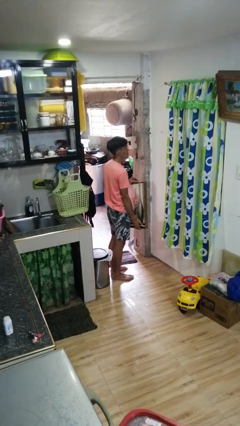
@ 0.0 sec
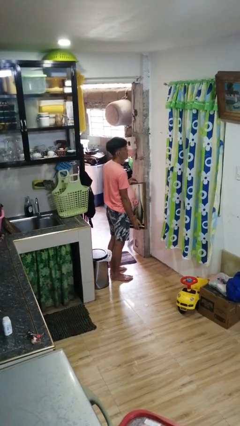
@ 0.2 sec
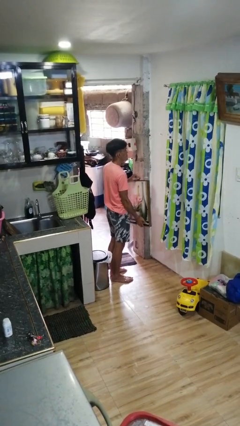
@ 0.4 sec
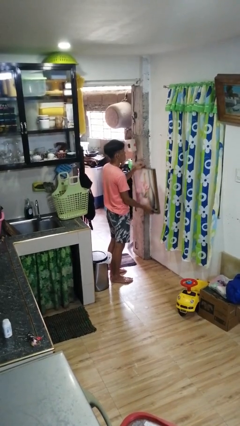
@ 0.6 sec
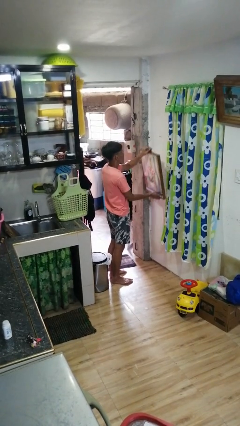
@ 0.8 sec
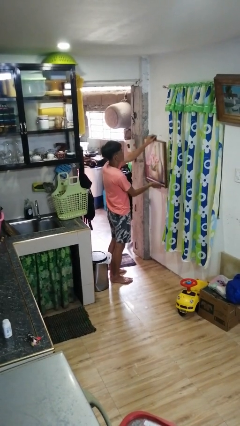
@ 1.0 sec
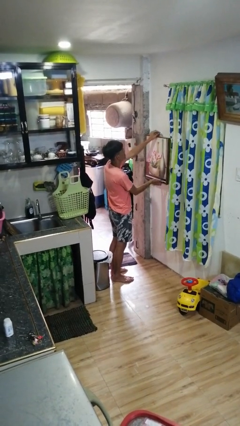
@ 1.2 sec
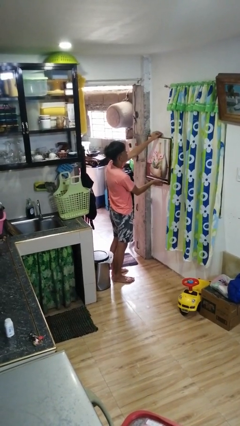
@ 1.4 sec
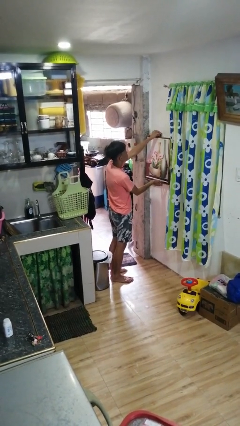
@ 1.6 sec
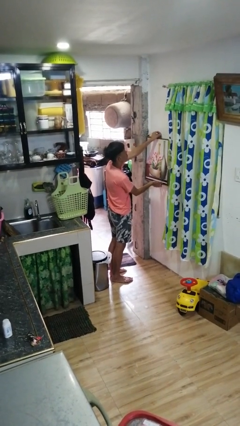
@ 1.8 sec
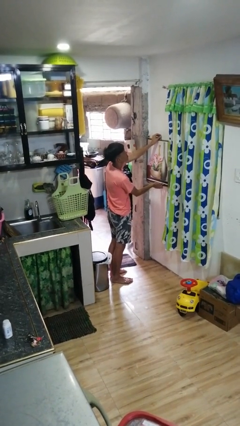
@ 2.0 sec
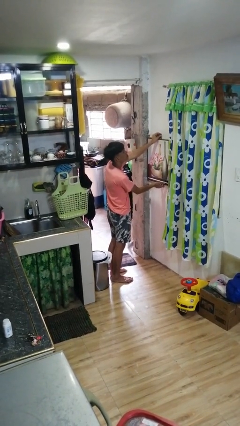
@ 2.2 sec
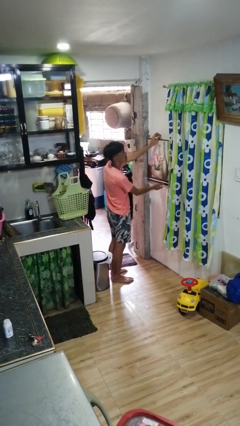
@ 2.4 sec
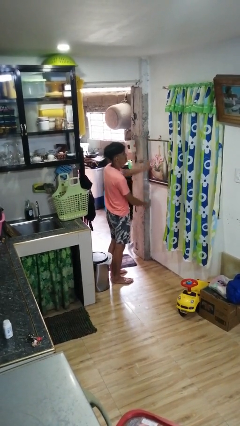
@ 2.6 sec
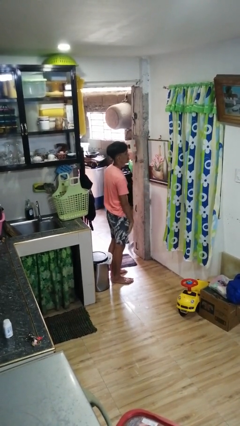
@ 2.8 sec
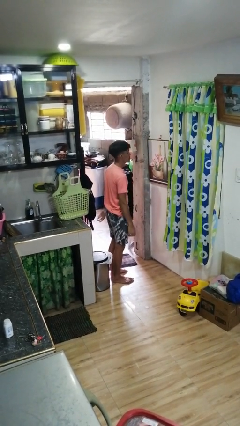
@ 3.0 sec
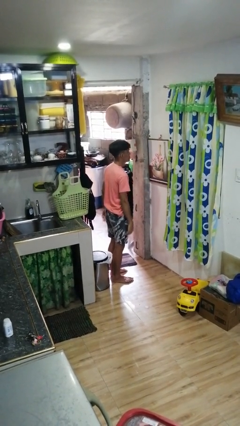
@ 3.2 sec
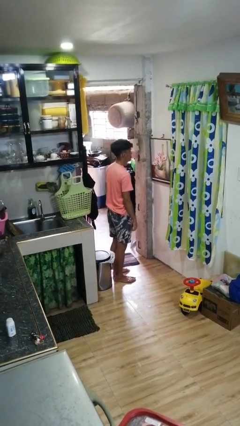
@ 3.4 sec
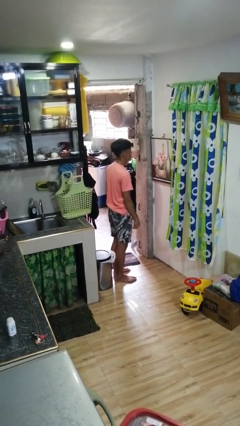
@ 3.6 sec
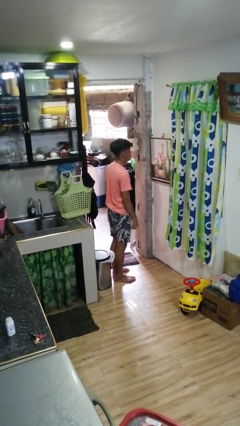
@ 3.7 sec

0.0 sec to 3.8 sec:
person puts up picture frame

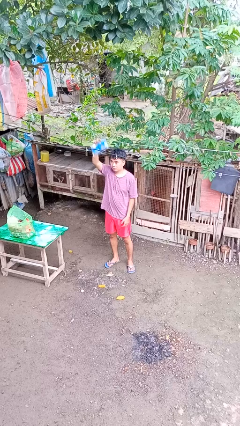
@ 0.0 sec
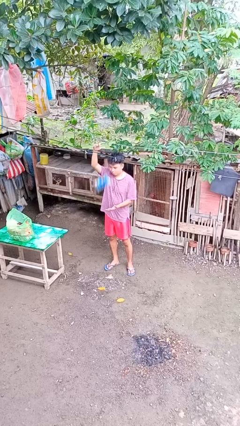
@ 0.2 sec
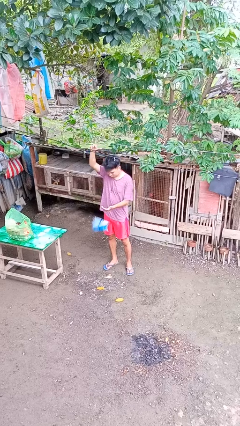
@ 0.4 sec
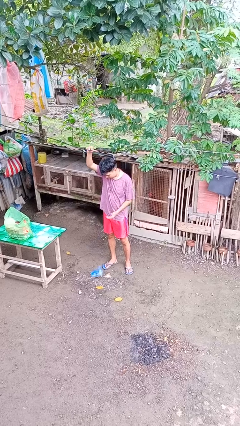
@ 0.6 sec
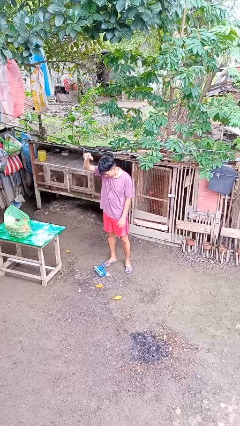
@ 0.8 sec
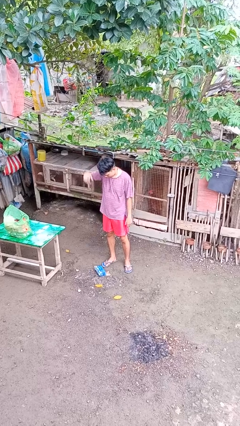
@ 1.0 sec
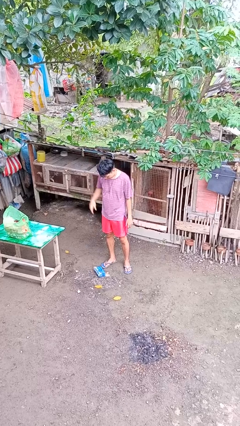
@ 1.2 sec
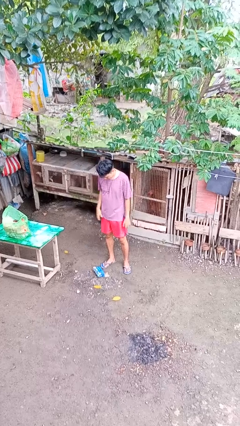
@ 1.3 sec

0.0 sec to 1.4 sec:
person drops object

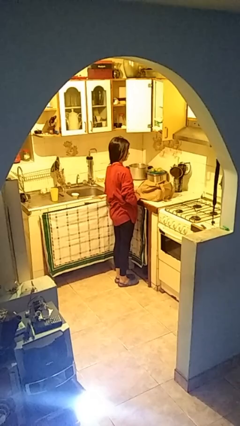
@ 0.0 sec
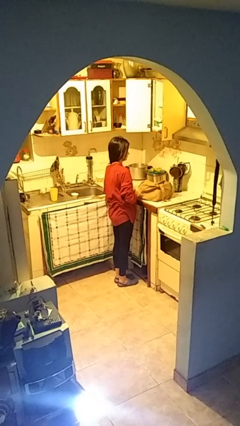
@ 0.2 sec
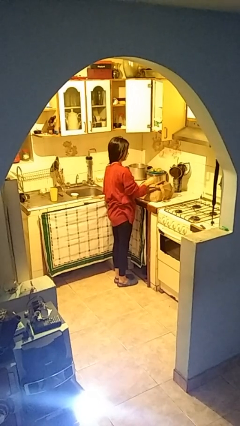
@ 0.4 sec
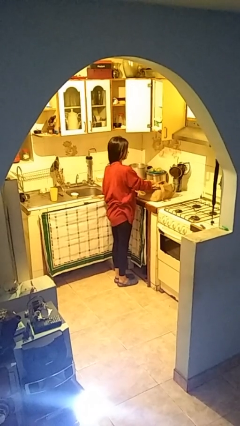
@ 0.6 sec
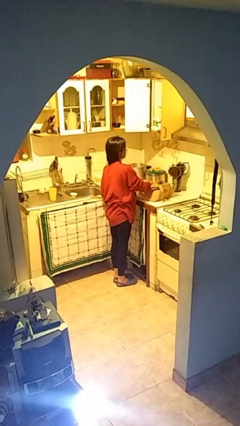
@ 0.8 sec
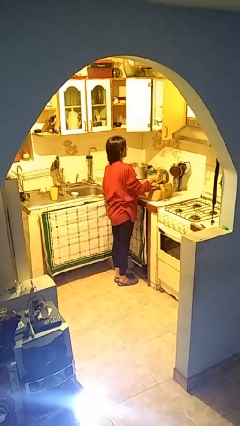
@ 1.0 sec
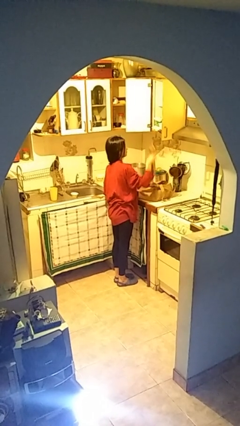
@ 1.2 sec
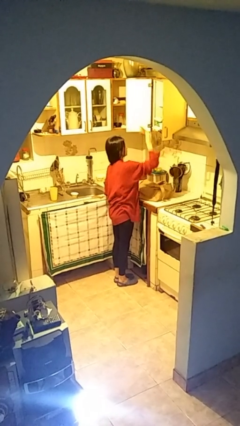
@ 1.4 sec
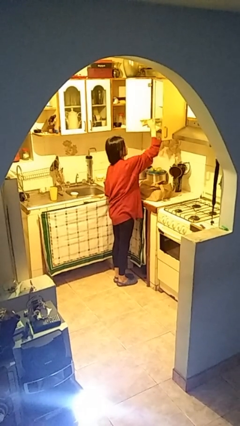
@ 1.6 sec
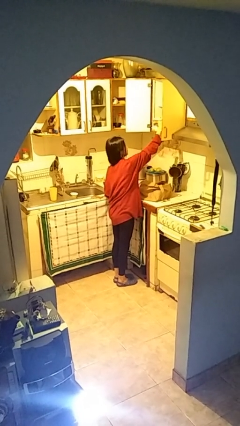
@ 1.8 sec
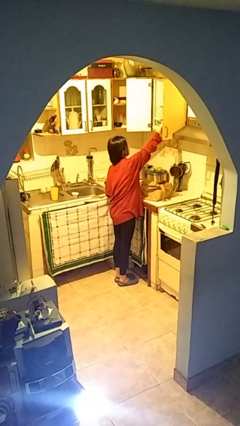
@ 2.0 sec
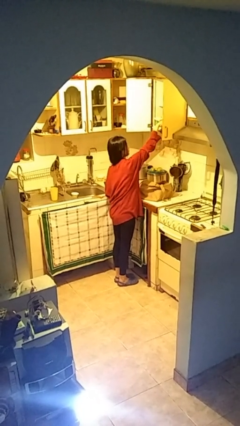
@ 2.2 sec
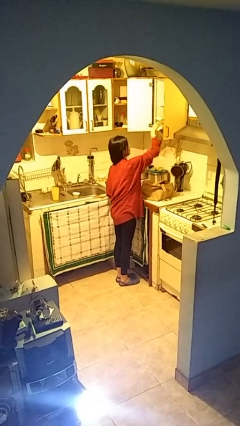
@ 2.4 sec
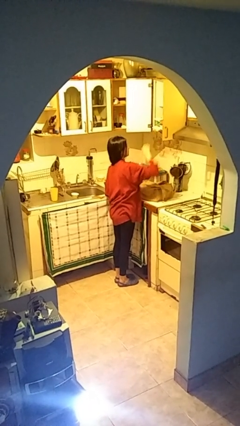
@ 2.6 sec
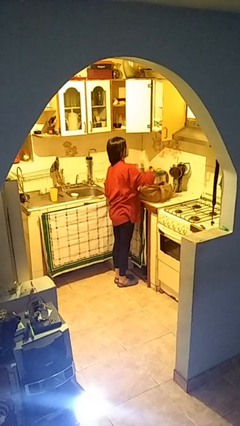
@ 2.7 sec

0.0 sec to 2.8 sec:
person loads groceries into cabinet

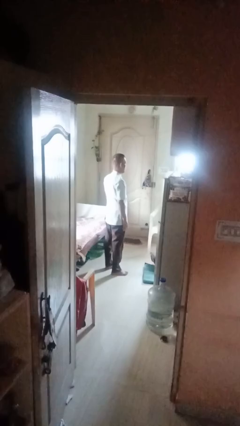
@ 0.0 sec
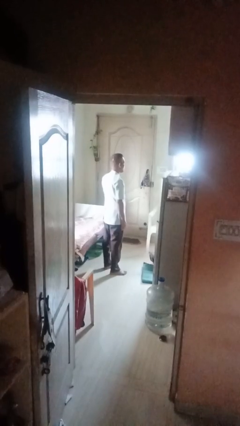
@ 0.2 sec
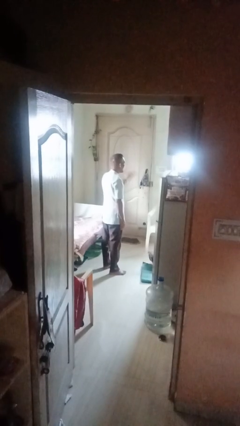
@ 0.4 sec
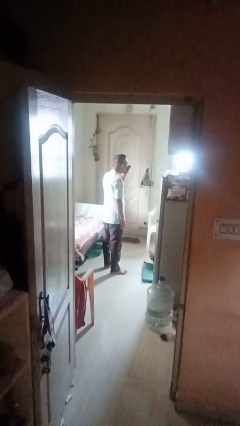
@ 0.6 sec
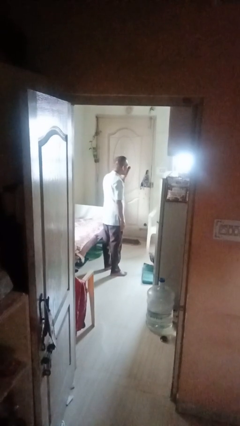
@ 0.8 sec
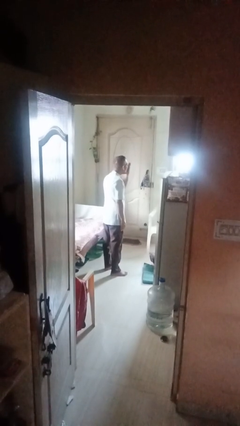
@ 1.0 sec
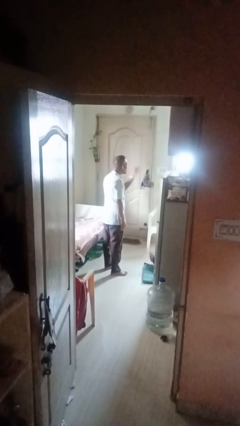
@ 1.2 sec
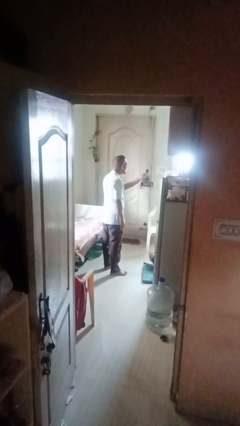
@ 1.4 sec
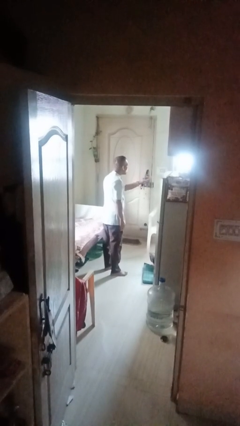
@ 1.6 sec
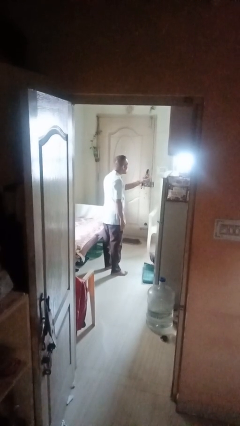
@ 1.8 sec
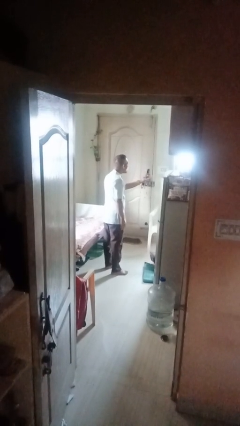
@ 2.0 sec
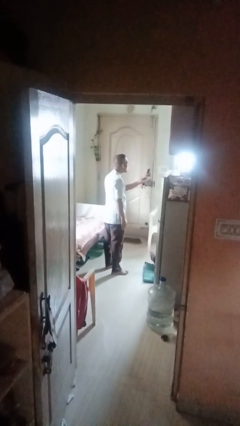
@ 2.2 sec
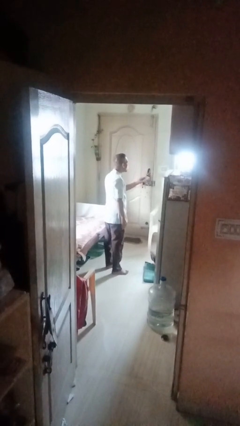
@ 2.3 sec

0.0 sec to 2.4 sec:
person gestures blow kiss

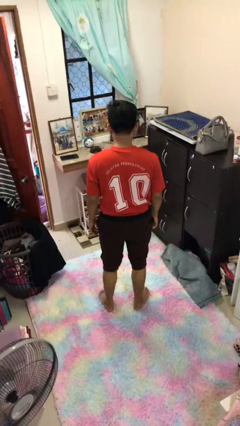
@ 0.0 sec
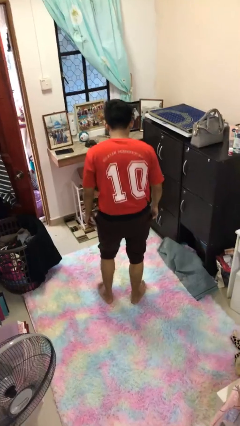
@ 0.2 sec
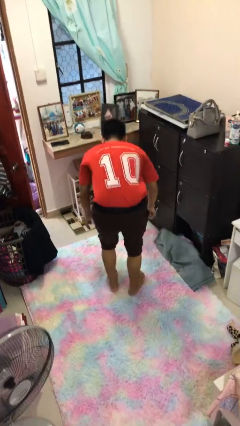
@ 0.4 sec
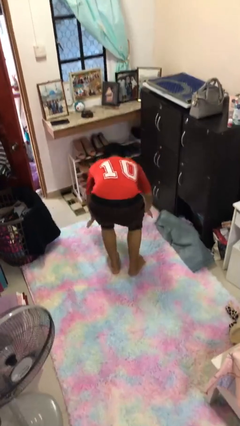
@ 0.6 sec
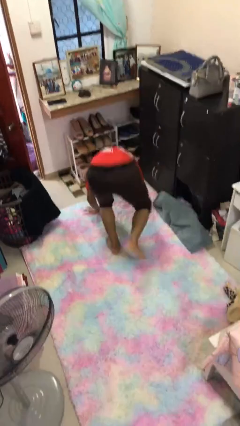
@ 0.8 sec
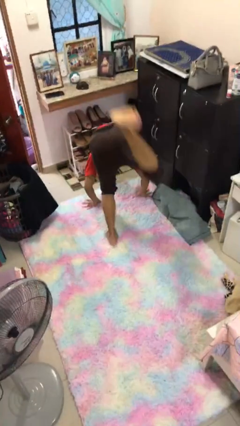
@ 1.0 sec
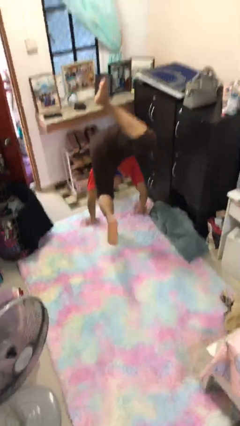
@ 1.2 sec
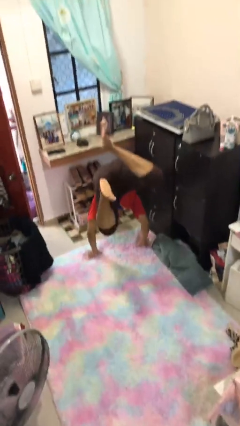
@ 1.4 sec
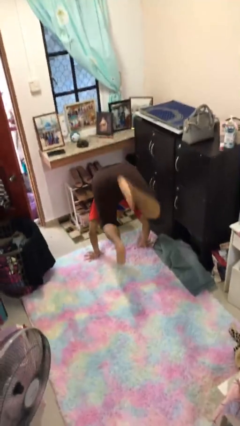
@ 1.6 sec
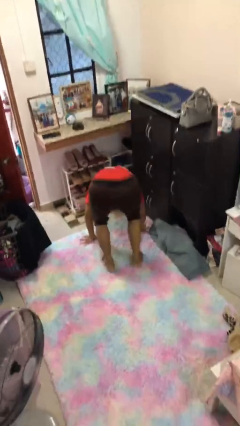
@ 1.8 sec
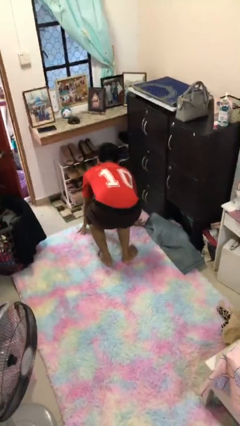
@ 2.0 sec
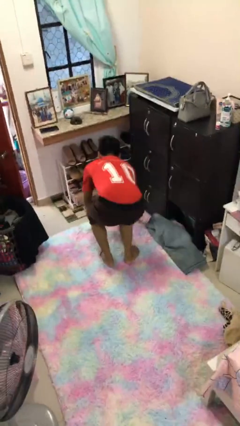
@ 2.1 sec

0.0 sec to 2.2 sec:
person handstand

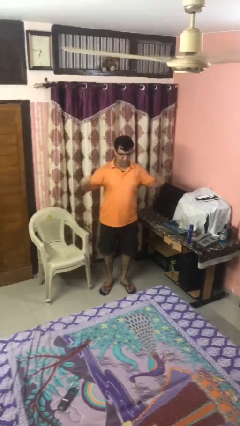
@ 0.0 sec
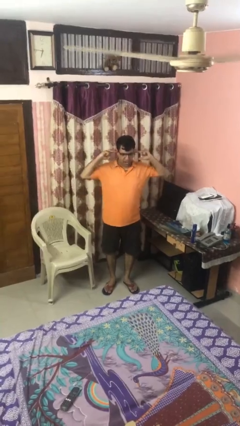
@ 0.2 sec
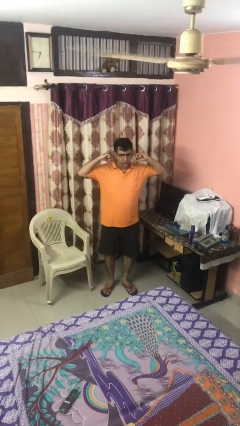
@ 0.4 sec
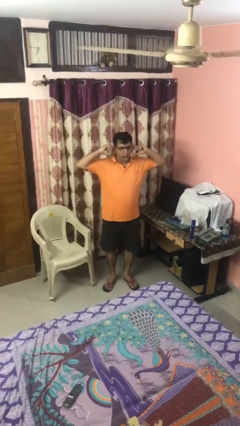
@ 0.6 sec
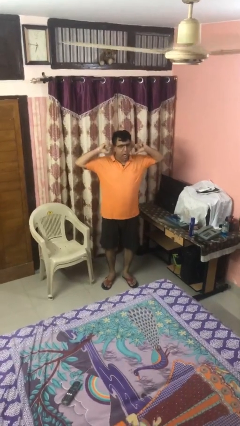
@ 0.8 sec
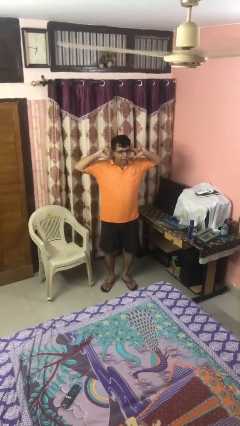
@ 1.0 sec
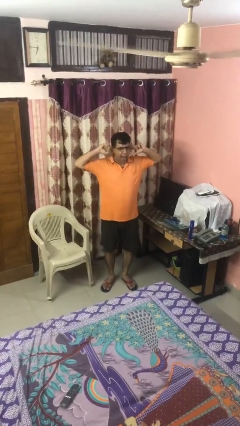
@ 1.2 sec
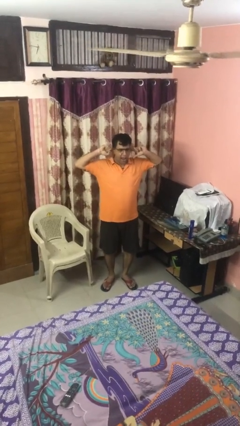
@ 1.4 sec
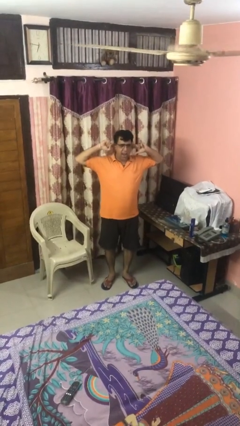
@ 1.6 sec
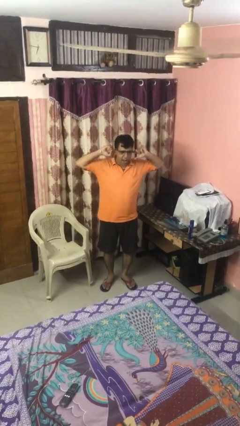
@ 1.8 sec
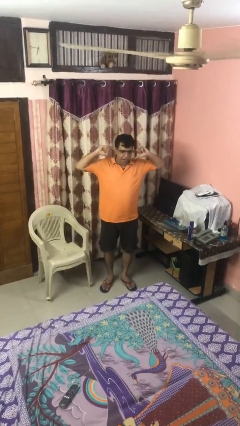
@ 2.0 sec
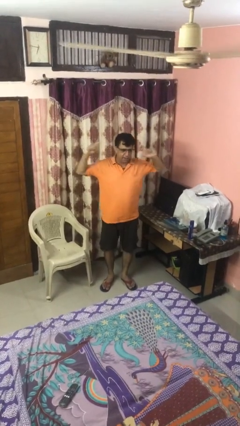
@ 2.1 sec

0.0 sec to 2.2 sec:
person puts fingers in ear

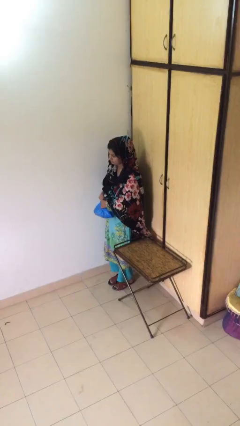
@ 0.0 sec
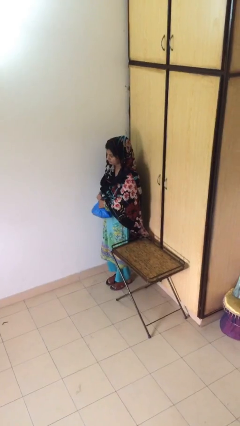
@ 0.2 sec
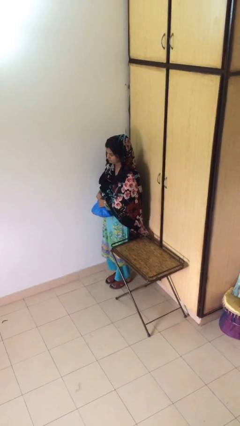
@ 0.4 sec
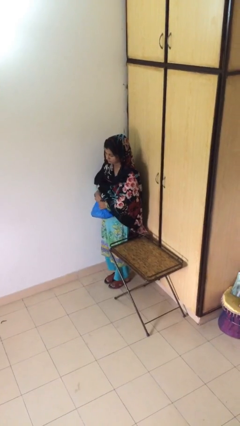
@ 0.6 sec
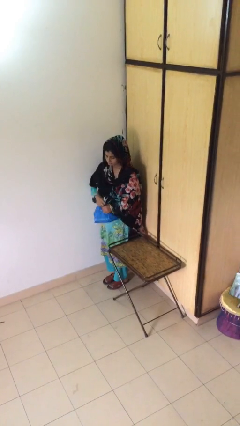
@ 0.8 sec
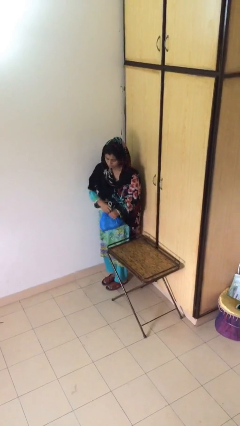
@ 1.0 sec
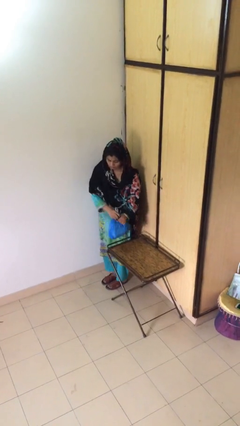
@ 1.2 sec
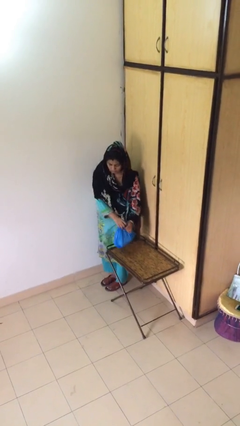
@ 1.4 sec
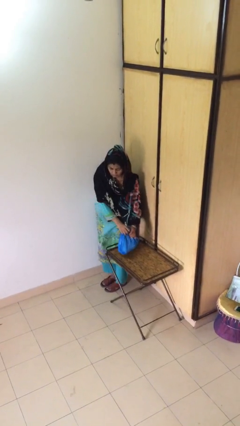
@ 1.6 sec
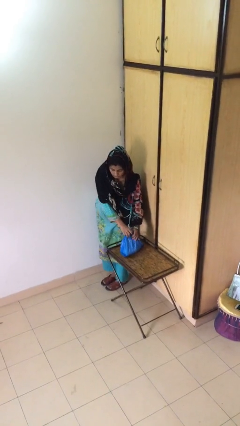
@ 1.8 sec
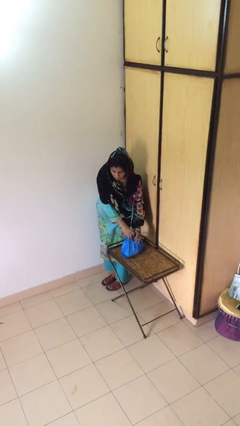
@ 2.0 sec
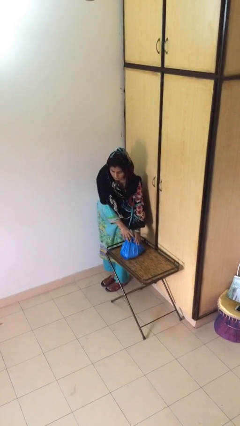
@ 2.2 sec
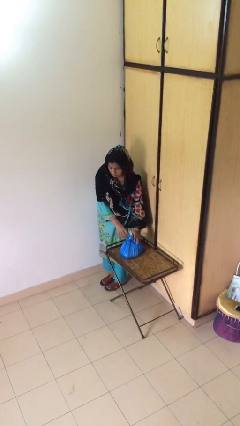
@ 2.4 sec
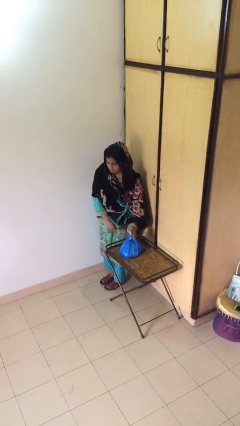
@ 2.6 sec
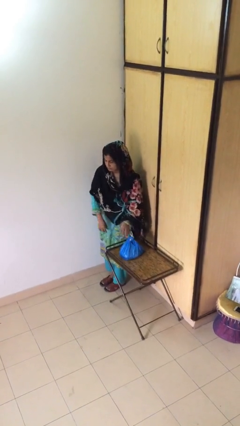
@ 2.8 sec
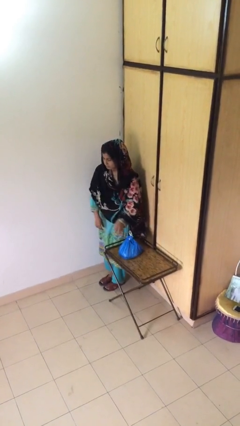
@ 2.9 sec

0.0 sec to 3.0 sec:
person puts down object on table
